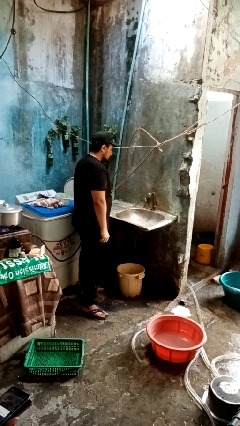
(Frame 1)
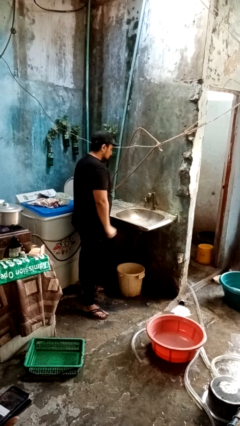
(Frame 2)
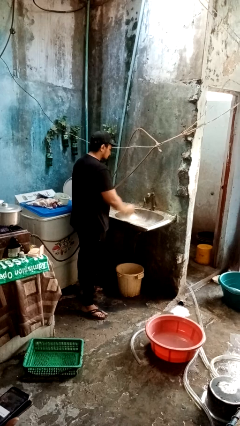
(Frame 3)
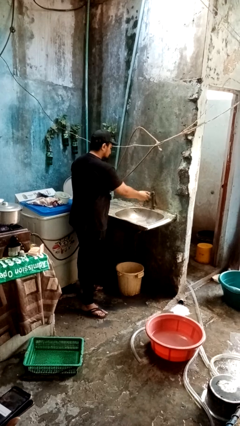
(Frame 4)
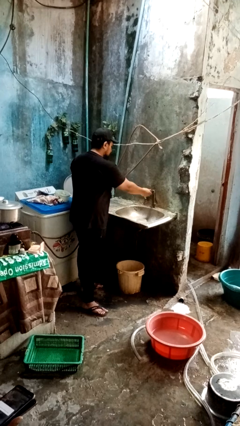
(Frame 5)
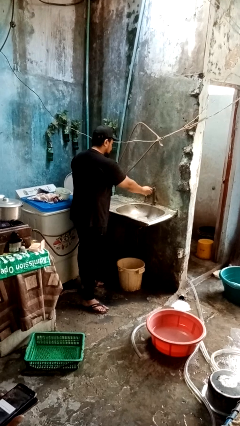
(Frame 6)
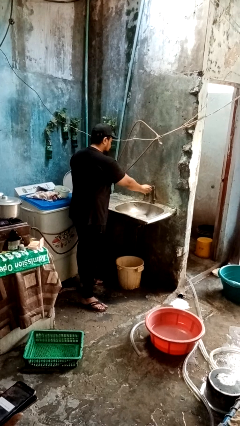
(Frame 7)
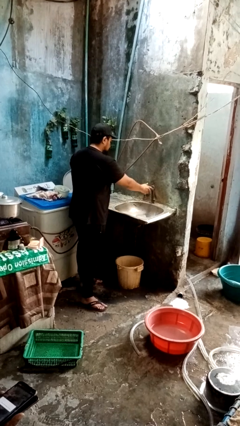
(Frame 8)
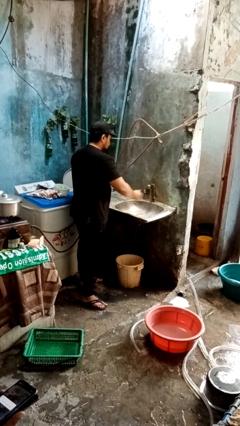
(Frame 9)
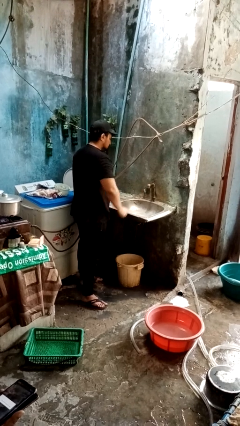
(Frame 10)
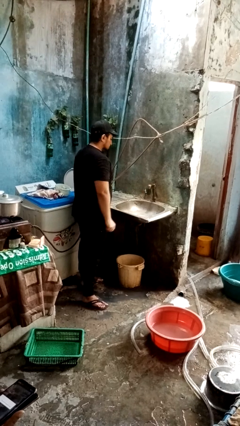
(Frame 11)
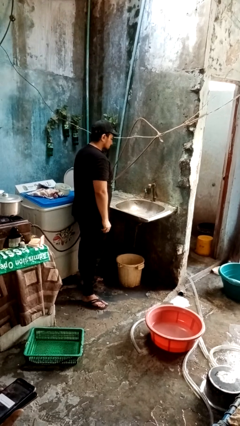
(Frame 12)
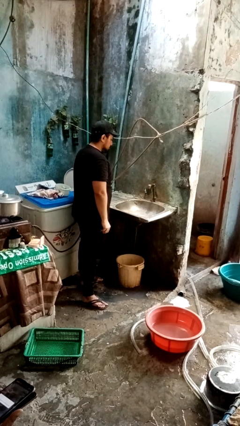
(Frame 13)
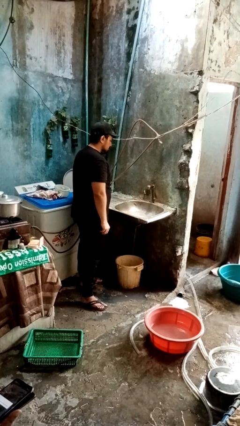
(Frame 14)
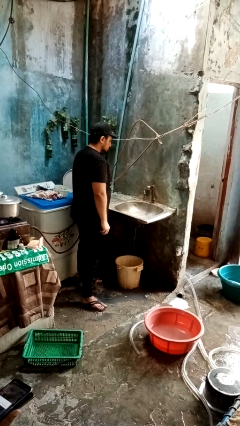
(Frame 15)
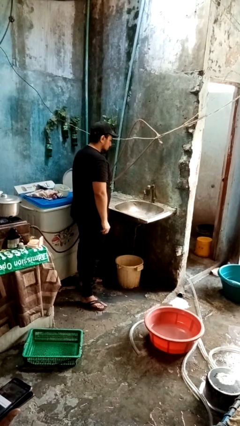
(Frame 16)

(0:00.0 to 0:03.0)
person turns on faucet

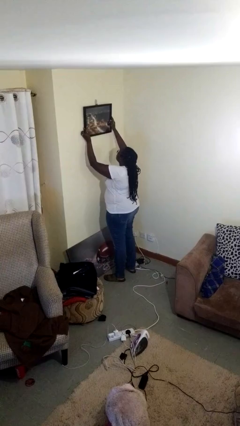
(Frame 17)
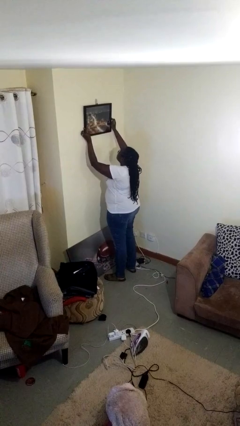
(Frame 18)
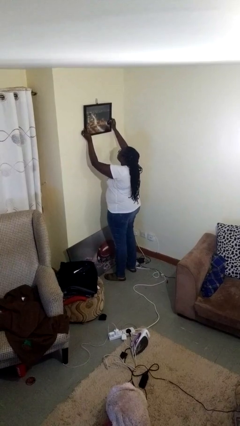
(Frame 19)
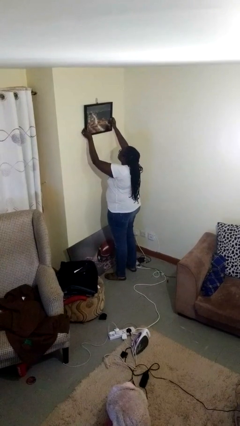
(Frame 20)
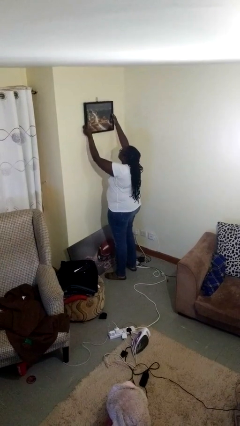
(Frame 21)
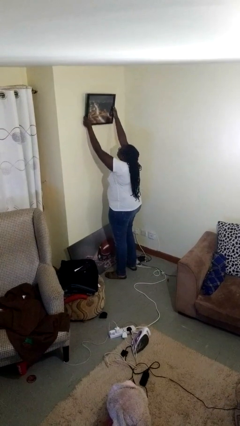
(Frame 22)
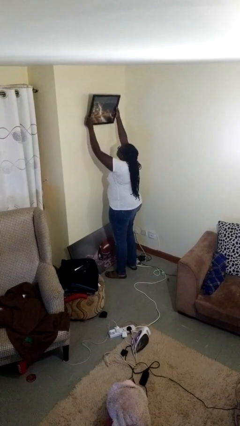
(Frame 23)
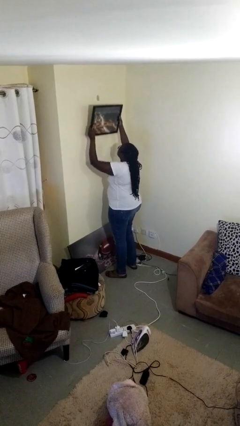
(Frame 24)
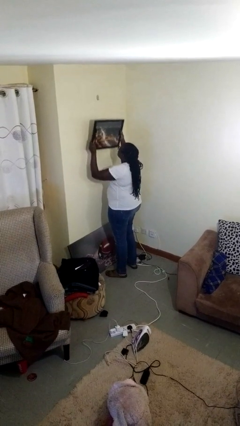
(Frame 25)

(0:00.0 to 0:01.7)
person takes down picture frame

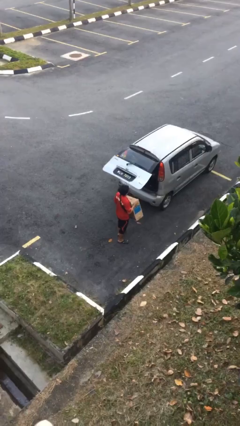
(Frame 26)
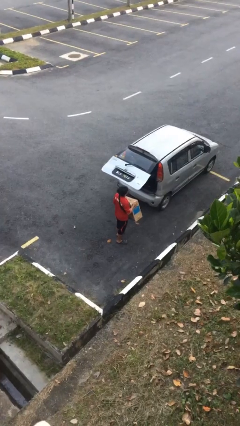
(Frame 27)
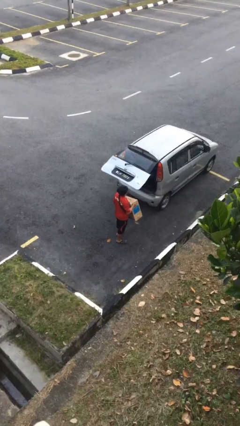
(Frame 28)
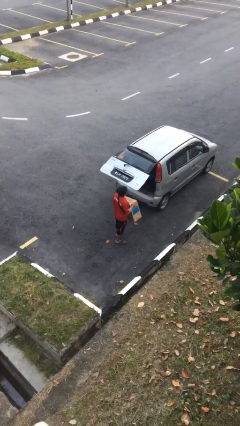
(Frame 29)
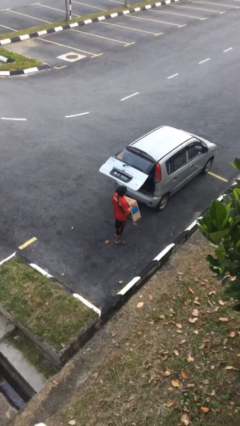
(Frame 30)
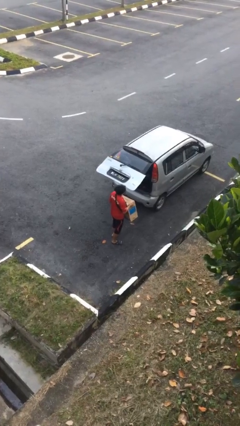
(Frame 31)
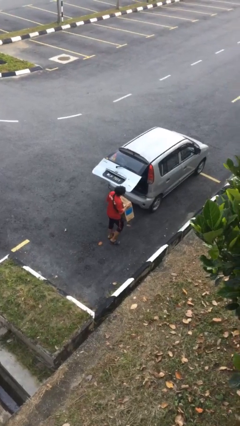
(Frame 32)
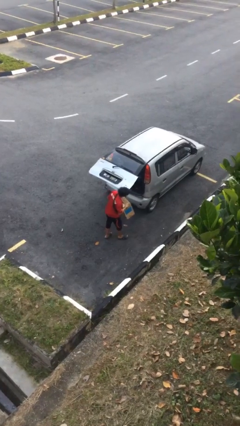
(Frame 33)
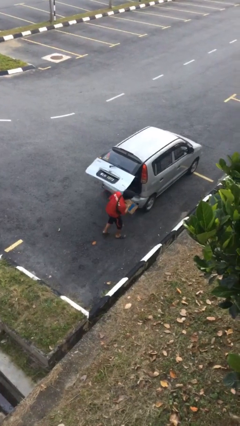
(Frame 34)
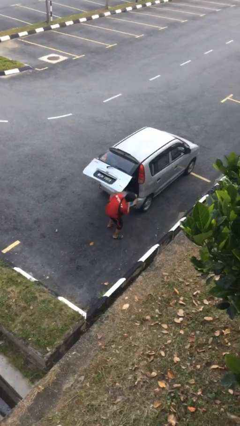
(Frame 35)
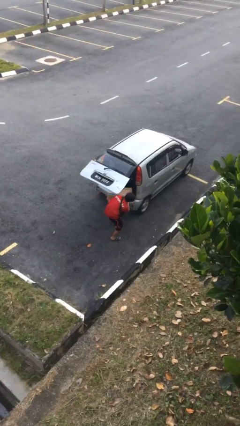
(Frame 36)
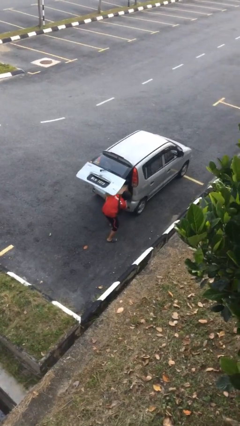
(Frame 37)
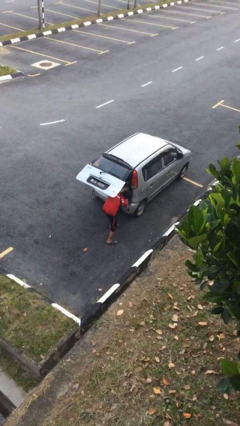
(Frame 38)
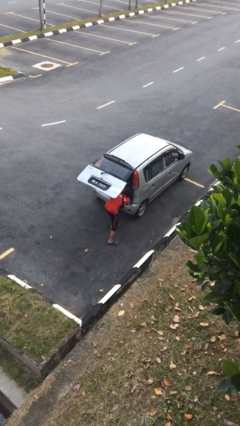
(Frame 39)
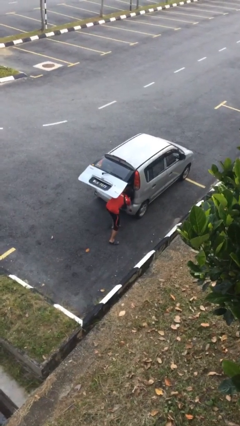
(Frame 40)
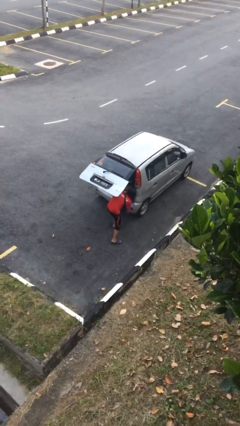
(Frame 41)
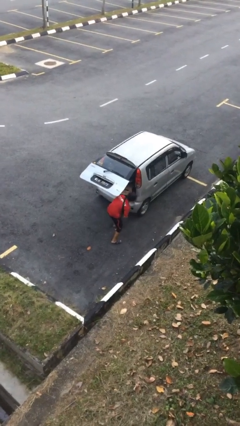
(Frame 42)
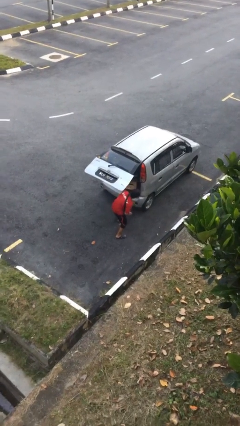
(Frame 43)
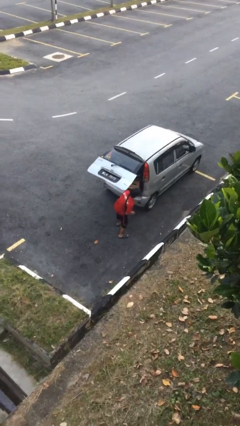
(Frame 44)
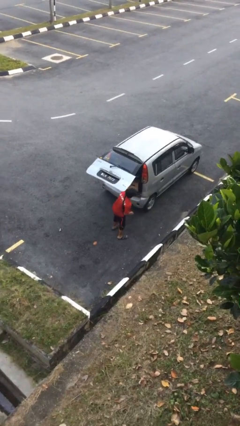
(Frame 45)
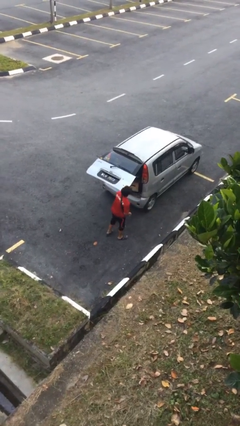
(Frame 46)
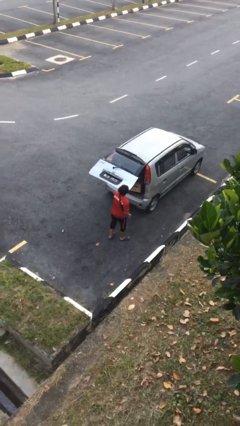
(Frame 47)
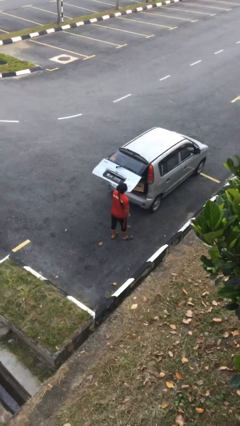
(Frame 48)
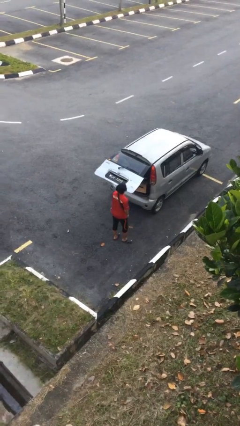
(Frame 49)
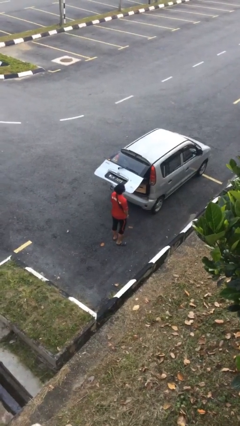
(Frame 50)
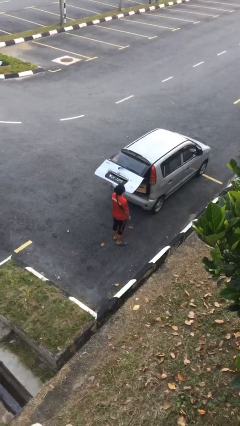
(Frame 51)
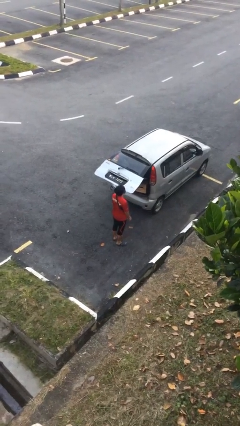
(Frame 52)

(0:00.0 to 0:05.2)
person loads car

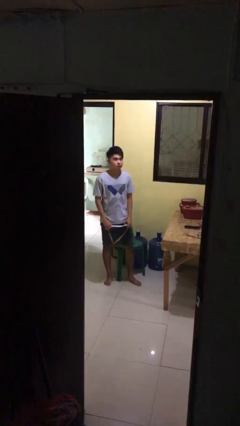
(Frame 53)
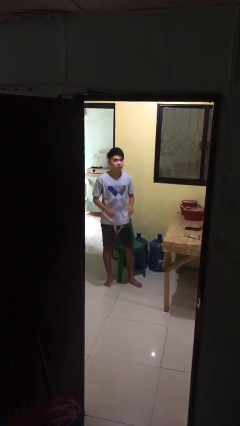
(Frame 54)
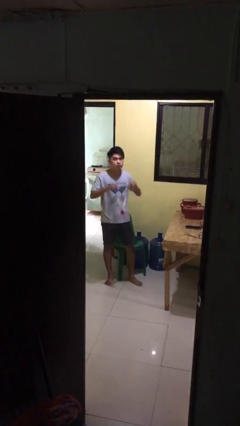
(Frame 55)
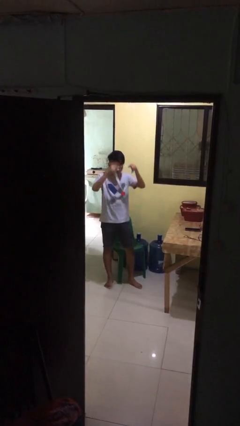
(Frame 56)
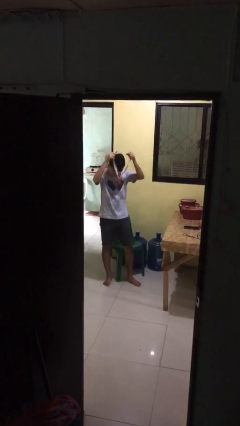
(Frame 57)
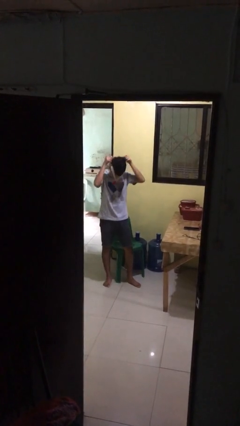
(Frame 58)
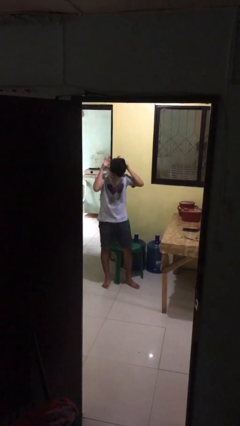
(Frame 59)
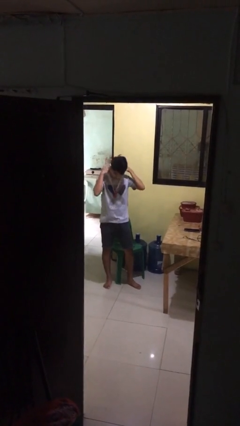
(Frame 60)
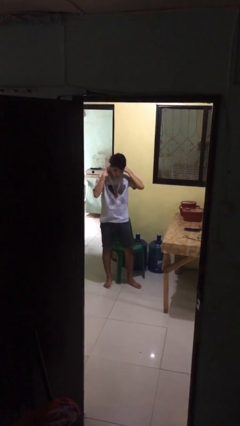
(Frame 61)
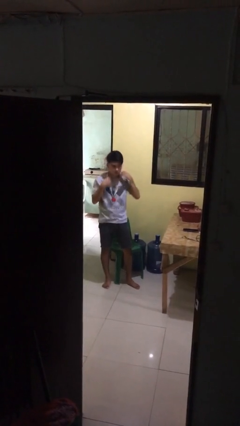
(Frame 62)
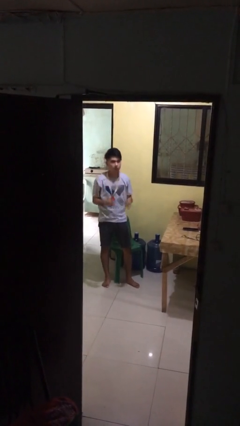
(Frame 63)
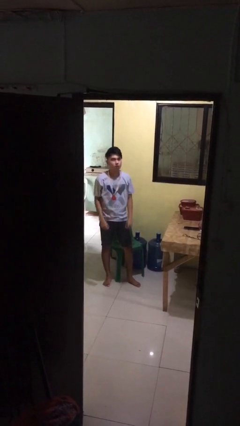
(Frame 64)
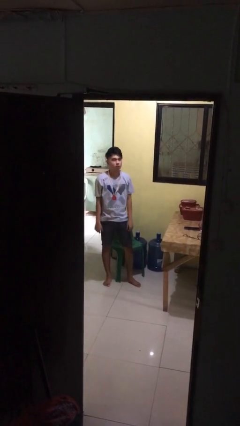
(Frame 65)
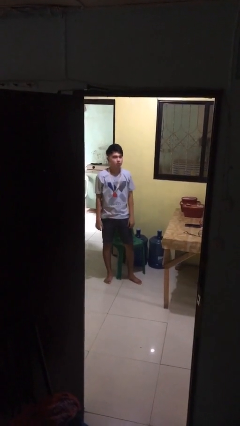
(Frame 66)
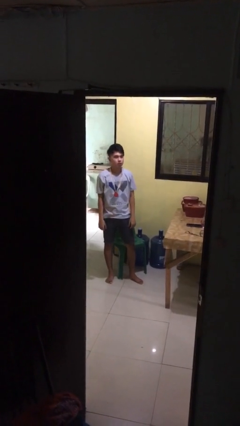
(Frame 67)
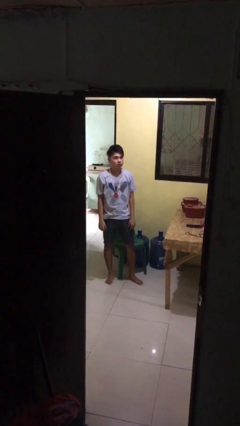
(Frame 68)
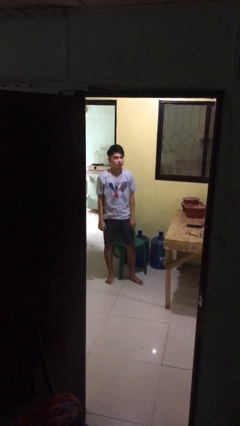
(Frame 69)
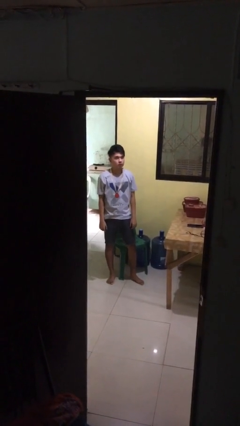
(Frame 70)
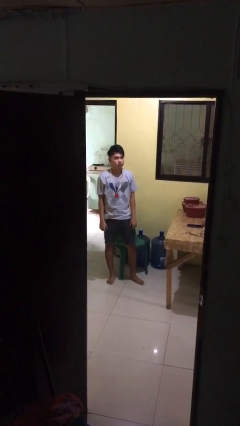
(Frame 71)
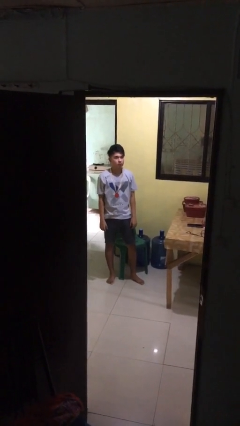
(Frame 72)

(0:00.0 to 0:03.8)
person puts on necklace

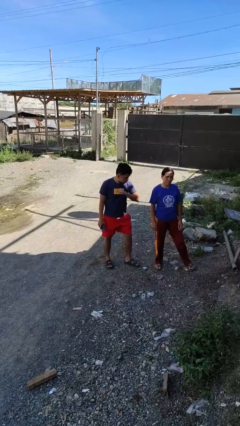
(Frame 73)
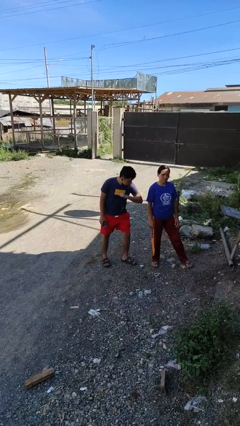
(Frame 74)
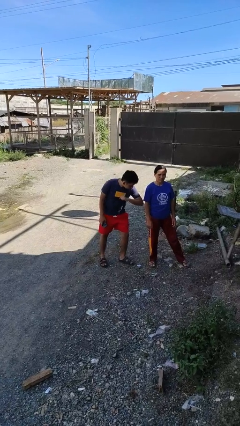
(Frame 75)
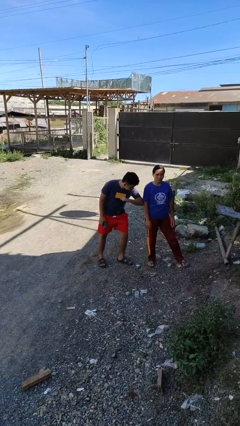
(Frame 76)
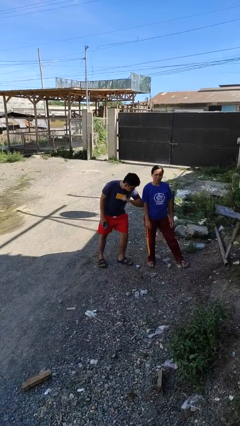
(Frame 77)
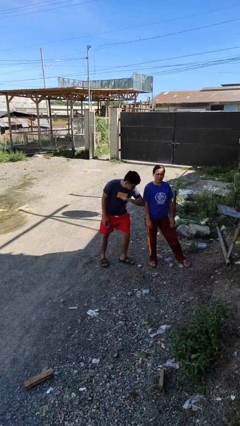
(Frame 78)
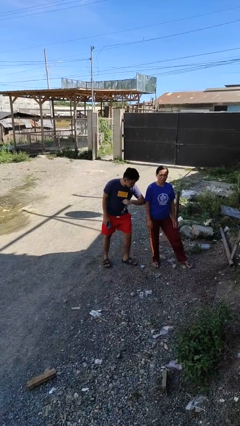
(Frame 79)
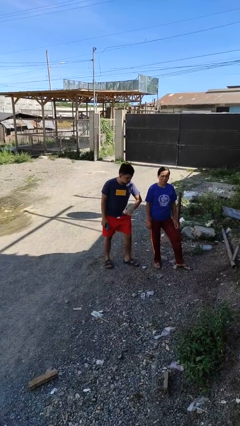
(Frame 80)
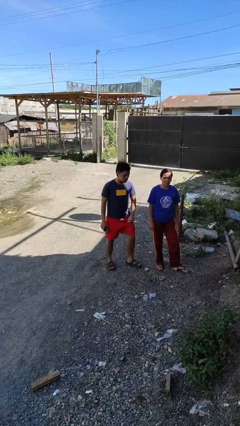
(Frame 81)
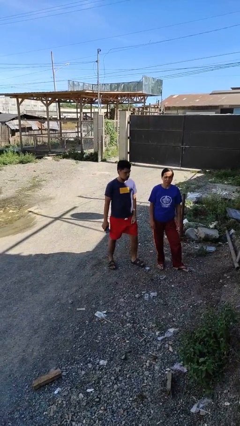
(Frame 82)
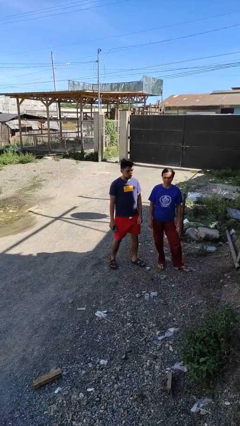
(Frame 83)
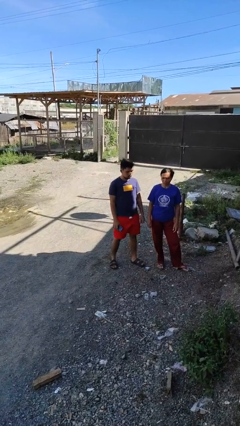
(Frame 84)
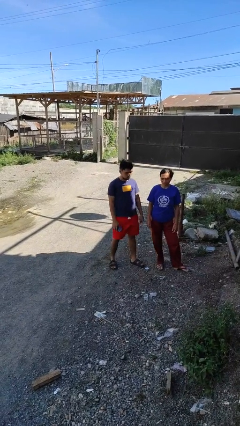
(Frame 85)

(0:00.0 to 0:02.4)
person nudges person with elbow

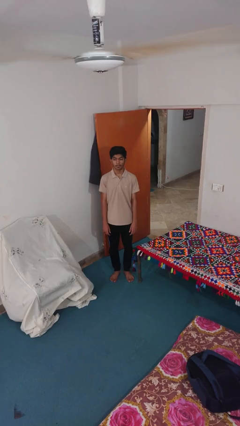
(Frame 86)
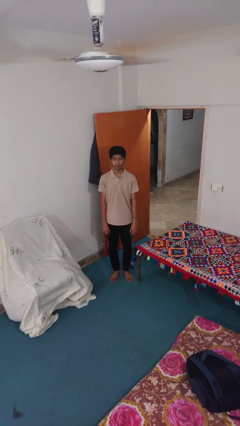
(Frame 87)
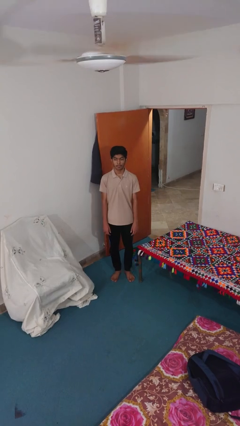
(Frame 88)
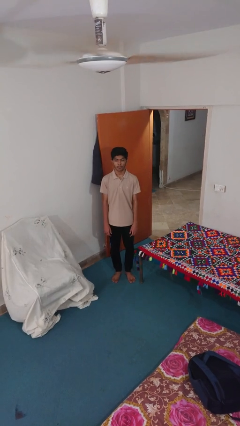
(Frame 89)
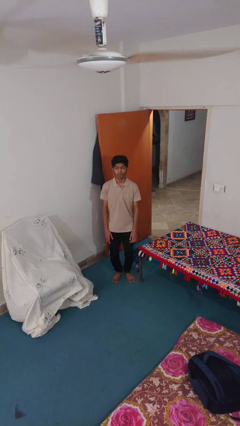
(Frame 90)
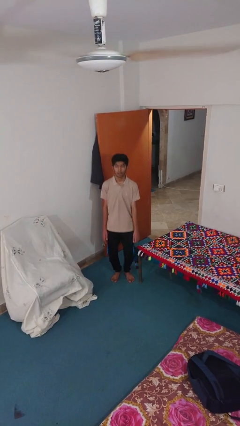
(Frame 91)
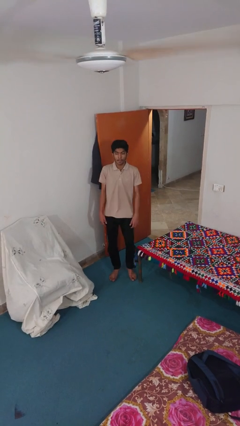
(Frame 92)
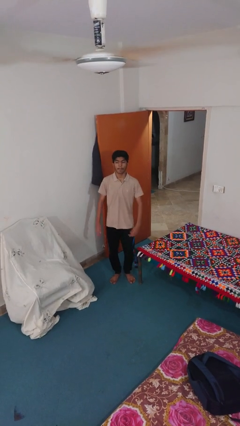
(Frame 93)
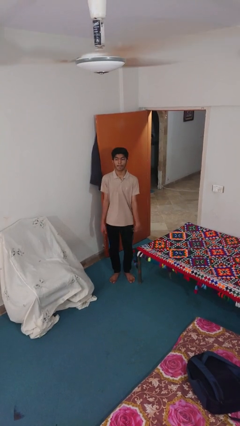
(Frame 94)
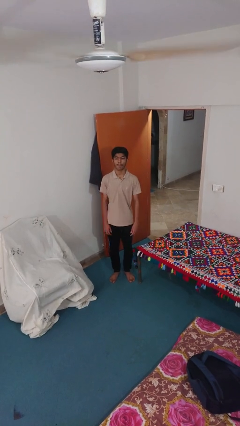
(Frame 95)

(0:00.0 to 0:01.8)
person jumps
